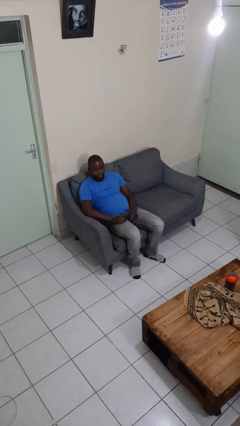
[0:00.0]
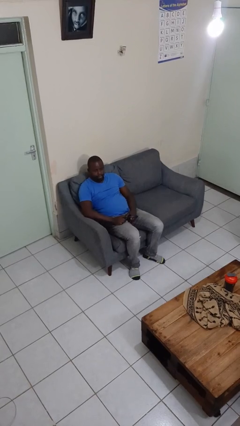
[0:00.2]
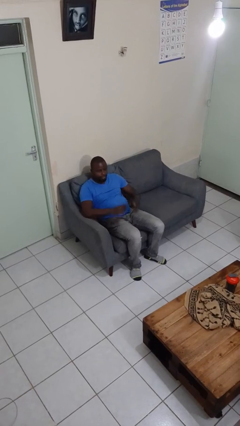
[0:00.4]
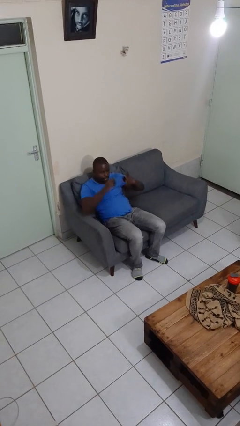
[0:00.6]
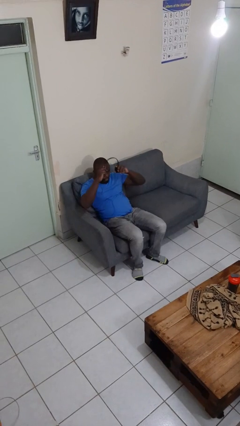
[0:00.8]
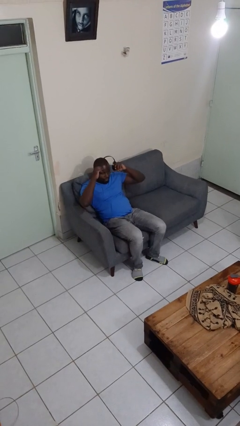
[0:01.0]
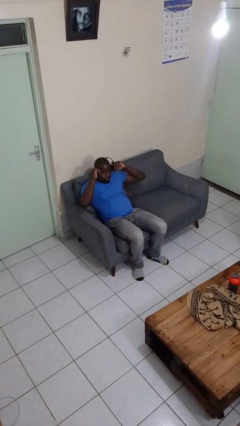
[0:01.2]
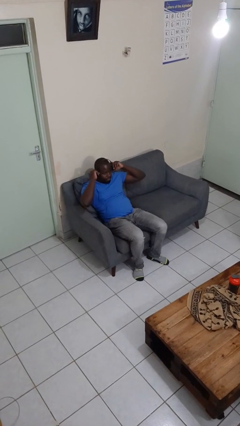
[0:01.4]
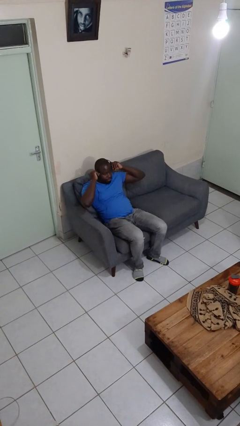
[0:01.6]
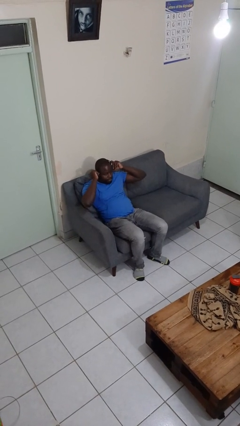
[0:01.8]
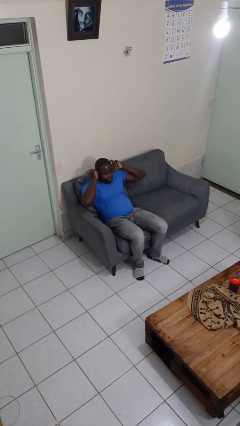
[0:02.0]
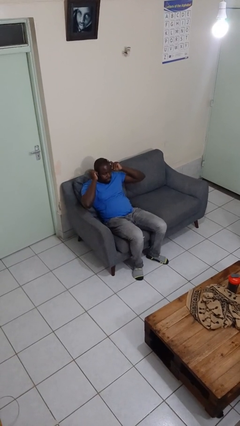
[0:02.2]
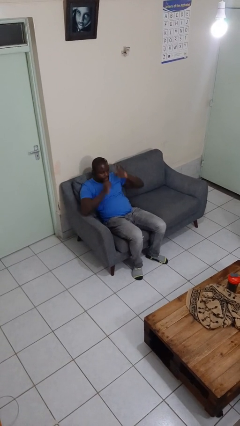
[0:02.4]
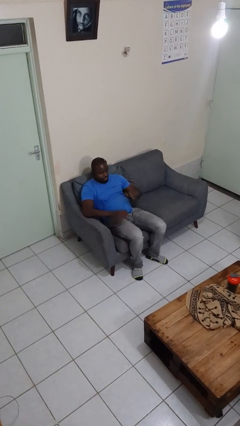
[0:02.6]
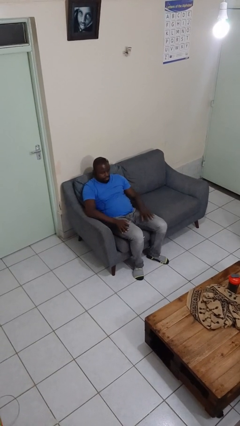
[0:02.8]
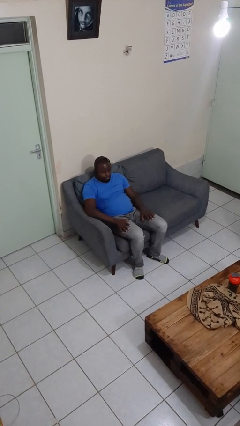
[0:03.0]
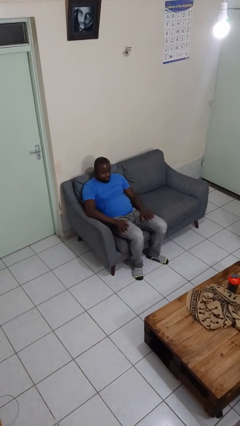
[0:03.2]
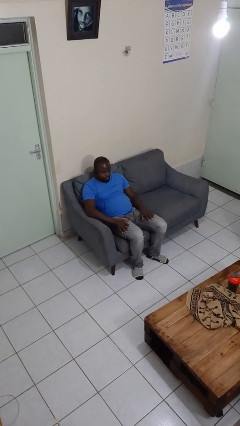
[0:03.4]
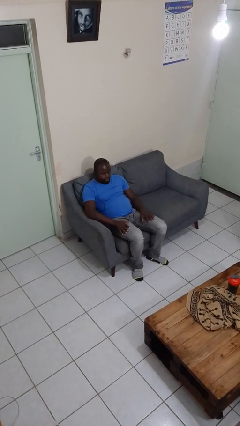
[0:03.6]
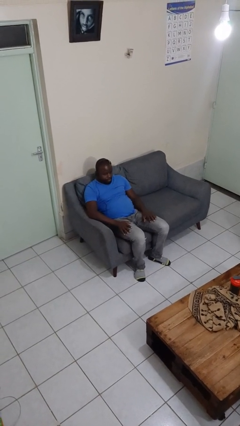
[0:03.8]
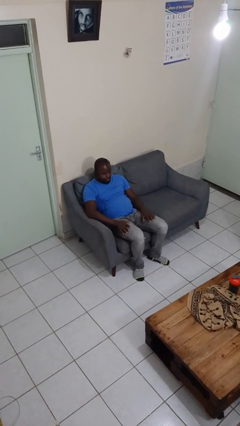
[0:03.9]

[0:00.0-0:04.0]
person puts on headphones

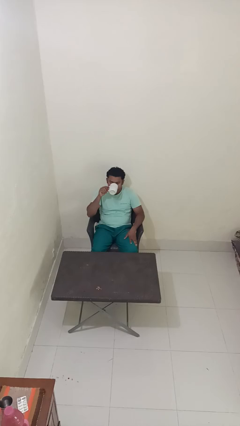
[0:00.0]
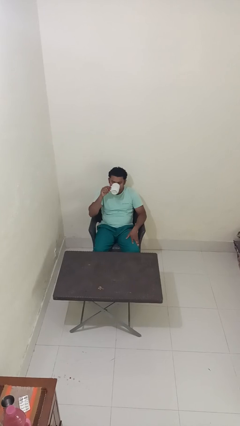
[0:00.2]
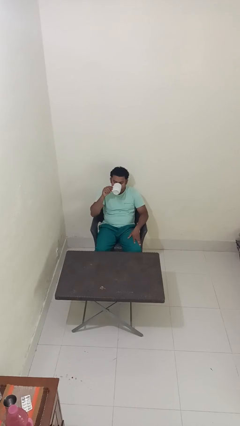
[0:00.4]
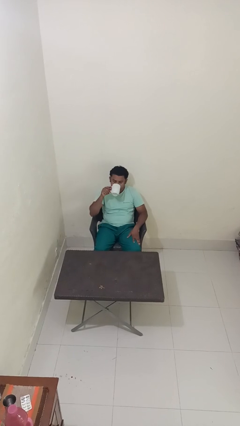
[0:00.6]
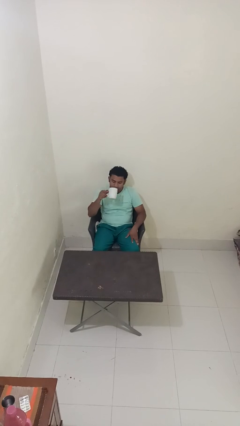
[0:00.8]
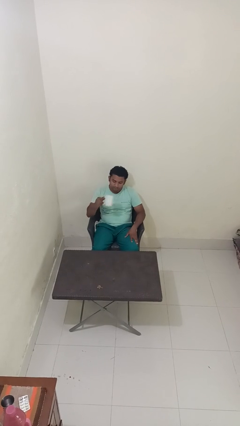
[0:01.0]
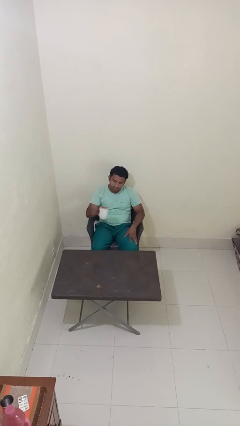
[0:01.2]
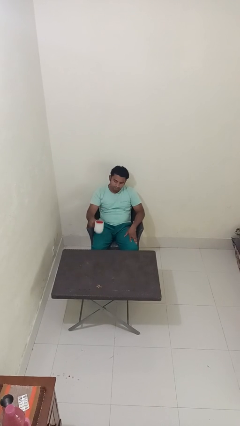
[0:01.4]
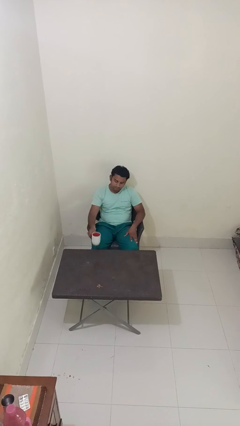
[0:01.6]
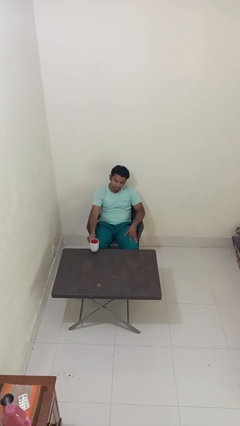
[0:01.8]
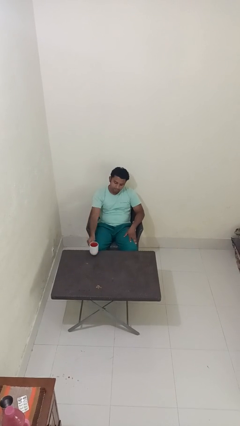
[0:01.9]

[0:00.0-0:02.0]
person puts down object on table

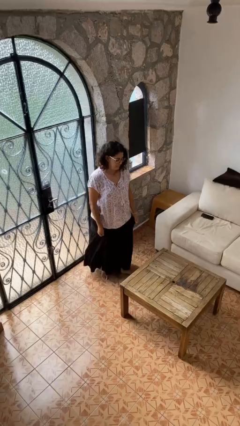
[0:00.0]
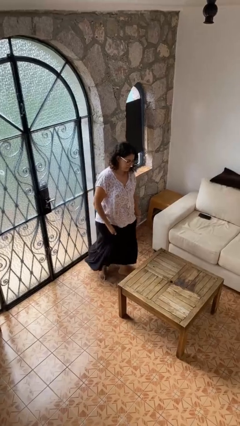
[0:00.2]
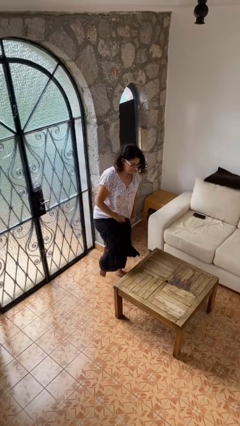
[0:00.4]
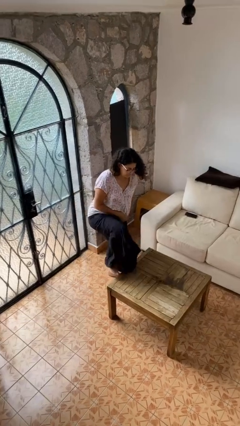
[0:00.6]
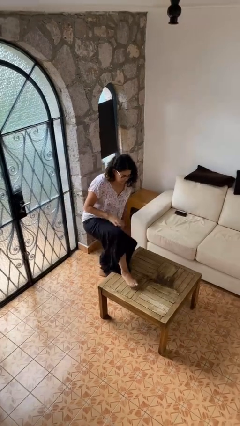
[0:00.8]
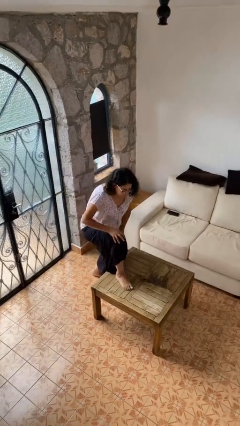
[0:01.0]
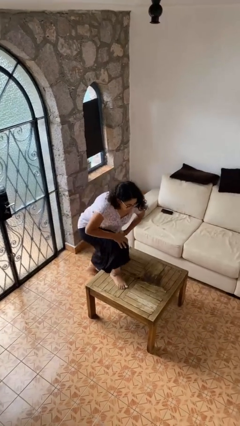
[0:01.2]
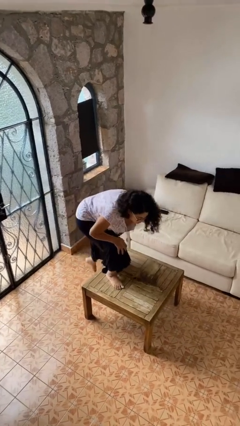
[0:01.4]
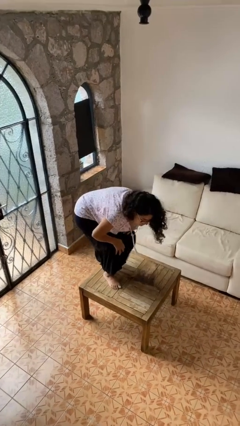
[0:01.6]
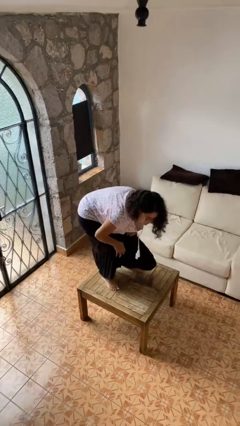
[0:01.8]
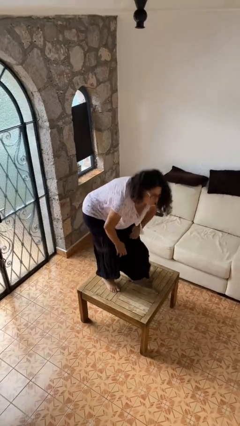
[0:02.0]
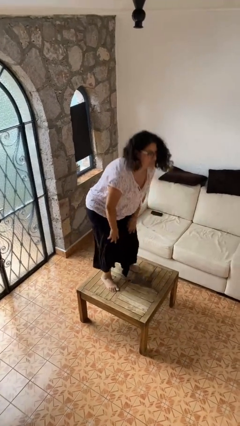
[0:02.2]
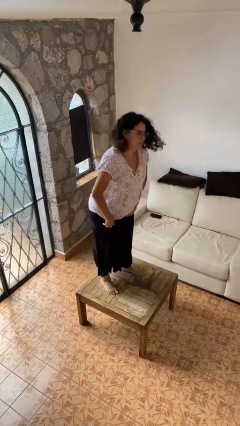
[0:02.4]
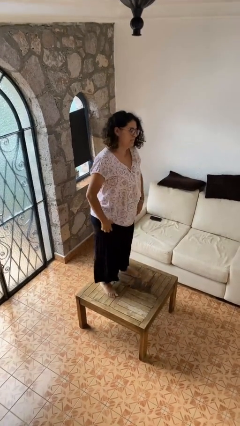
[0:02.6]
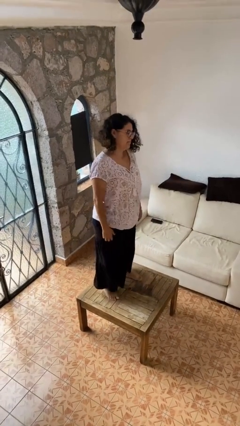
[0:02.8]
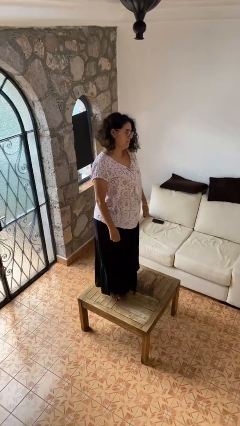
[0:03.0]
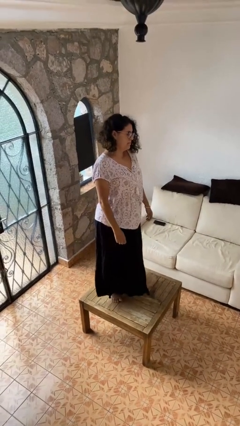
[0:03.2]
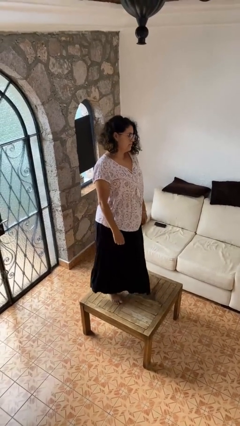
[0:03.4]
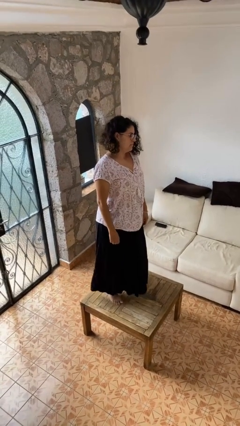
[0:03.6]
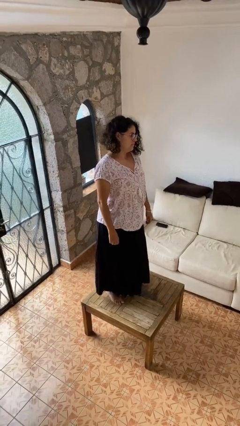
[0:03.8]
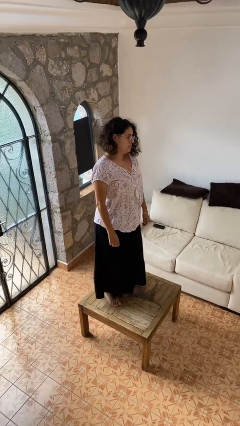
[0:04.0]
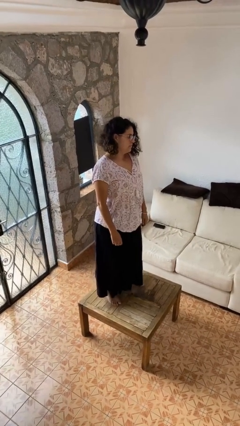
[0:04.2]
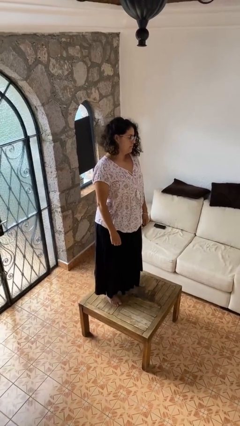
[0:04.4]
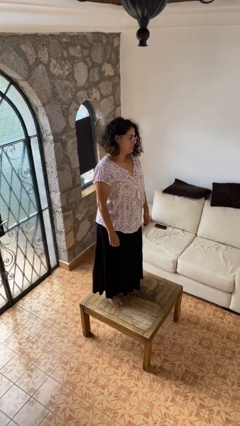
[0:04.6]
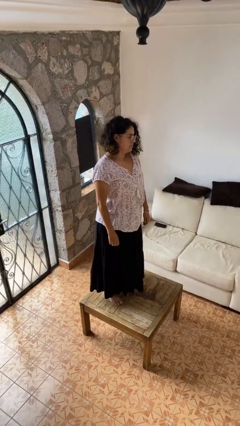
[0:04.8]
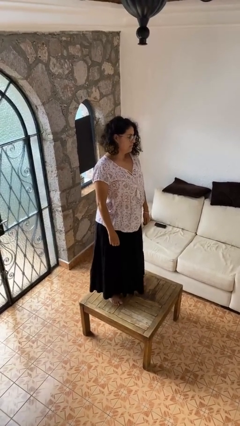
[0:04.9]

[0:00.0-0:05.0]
person climbs on table

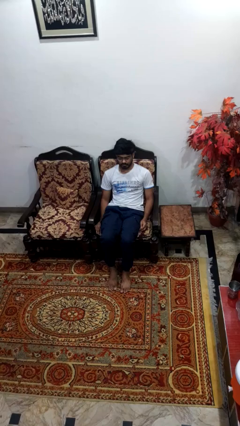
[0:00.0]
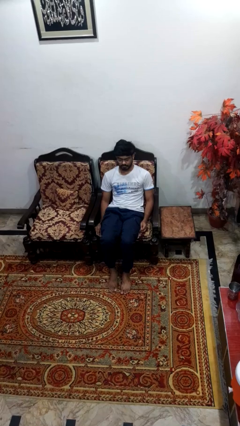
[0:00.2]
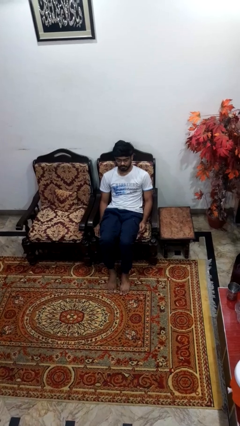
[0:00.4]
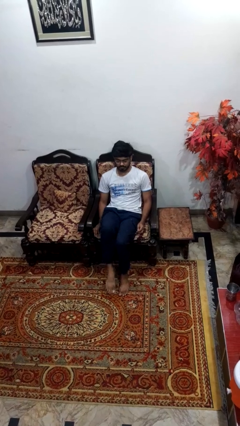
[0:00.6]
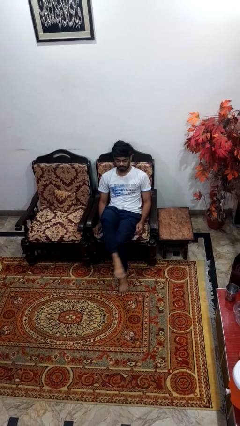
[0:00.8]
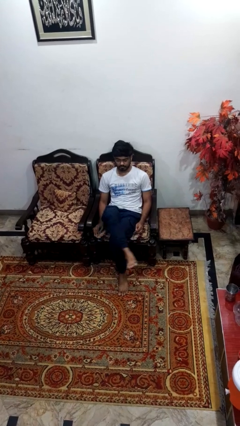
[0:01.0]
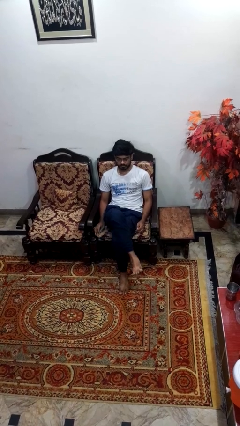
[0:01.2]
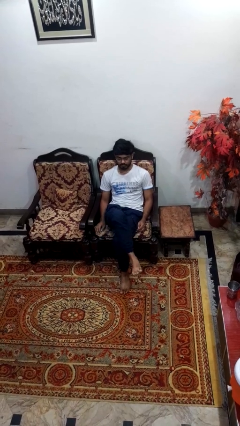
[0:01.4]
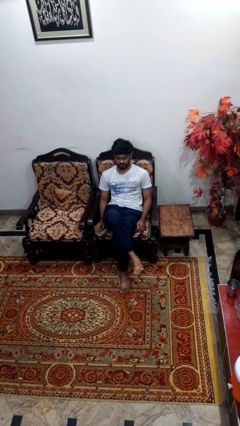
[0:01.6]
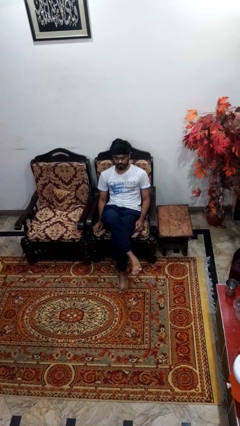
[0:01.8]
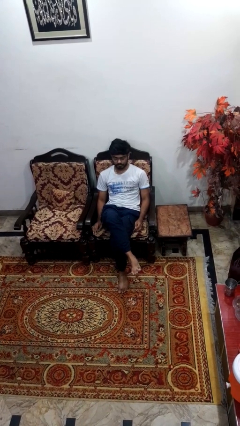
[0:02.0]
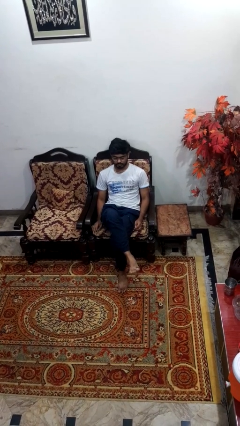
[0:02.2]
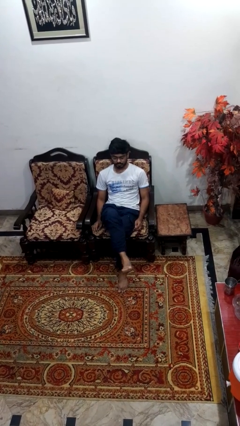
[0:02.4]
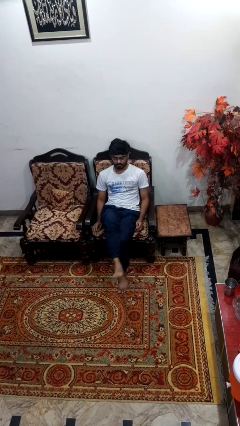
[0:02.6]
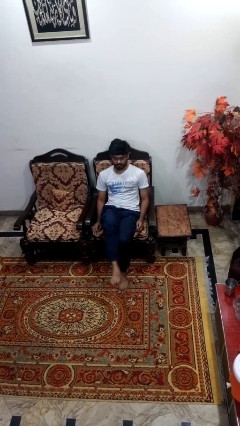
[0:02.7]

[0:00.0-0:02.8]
person crosses legs

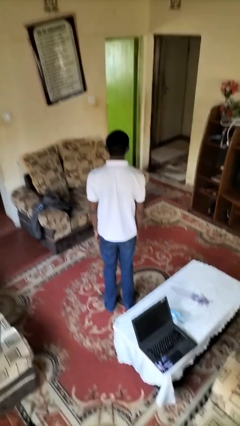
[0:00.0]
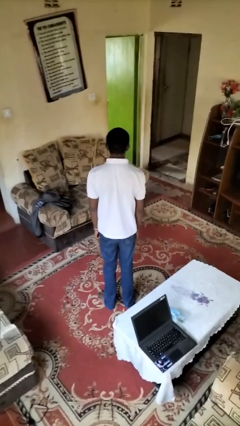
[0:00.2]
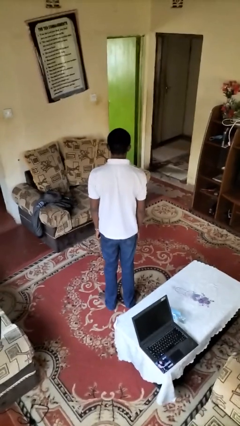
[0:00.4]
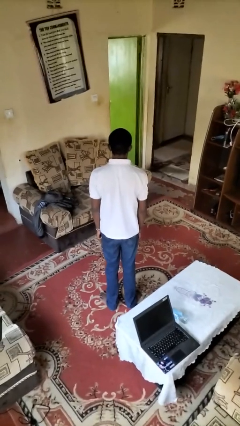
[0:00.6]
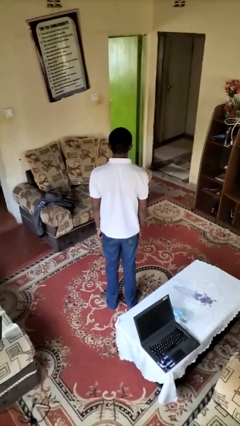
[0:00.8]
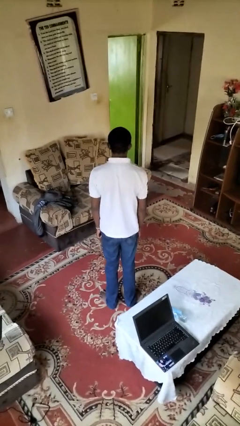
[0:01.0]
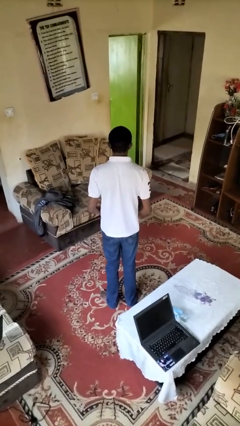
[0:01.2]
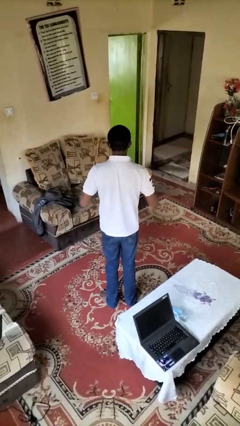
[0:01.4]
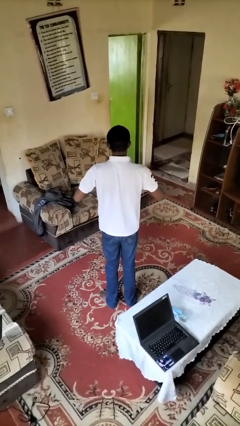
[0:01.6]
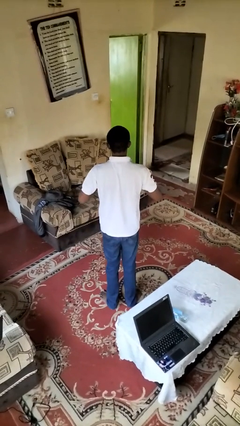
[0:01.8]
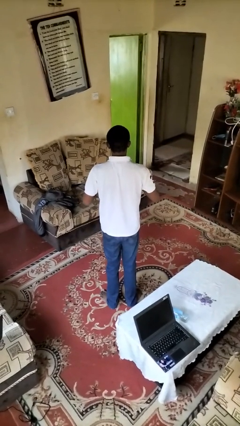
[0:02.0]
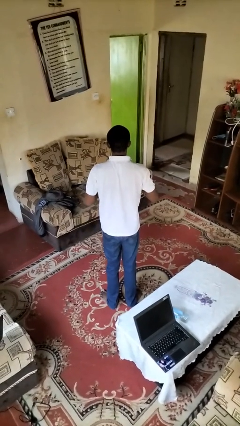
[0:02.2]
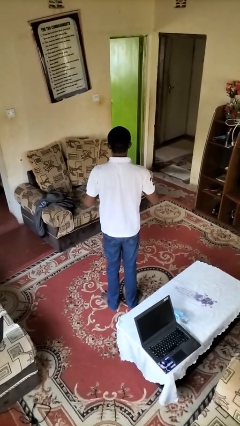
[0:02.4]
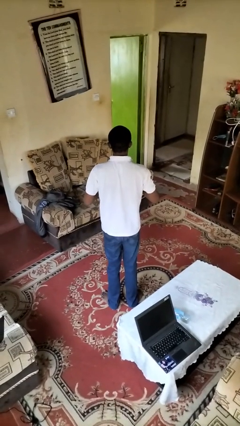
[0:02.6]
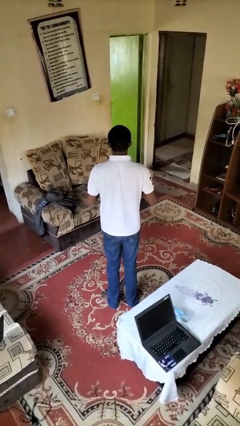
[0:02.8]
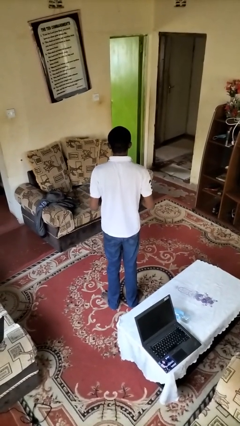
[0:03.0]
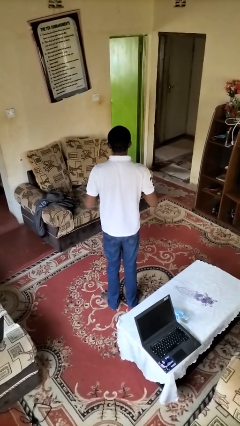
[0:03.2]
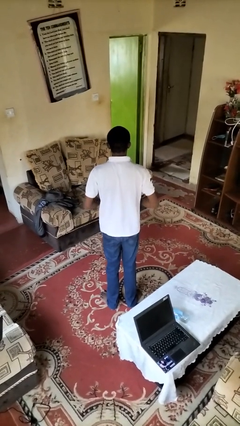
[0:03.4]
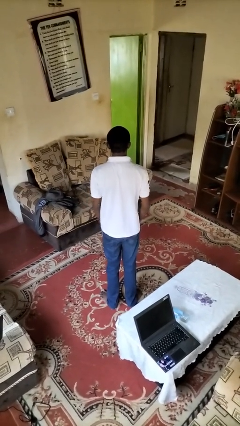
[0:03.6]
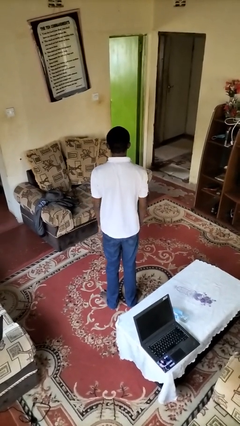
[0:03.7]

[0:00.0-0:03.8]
person drums on chest
